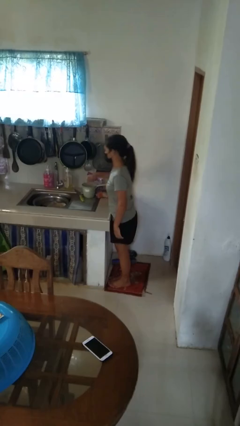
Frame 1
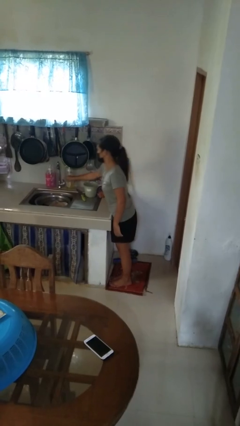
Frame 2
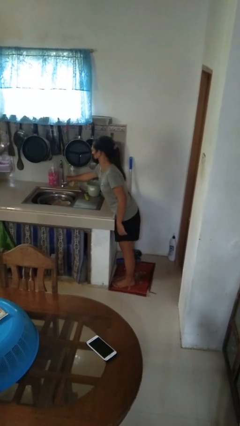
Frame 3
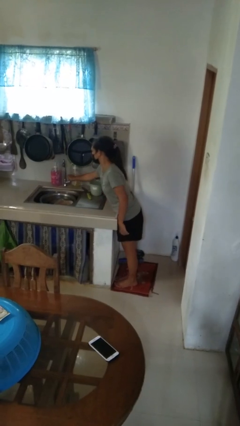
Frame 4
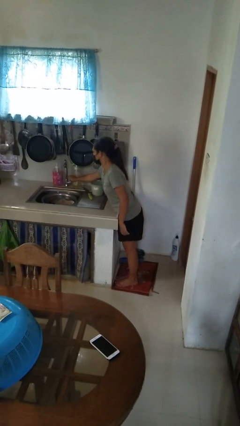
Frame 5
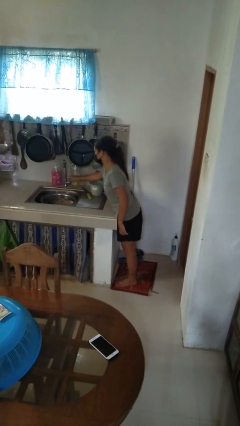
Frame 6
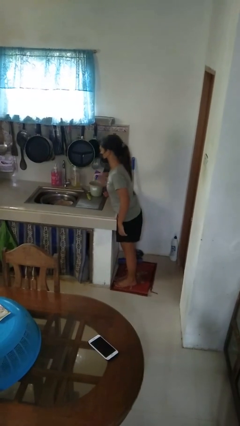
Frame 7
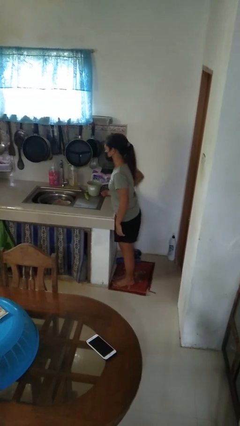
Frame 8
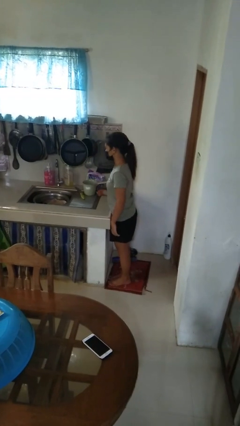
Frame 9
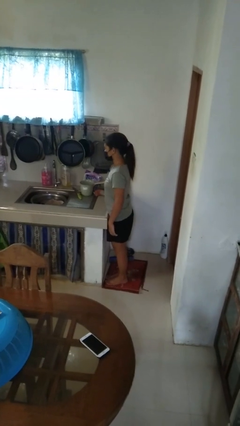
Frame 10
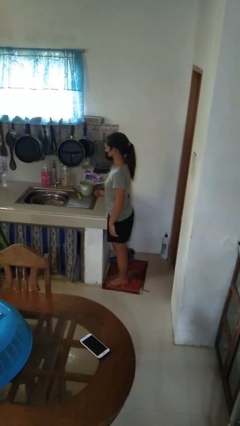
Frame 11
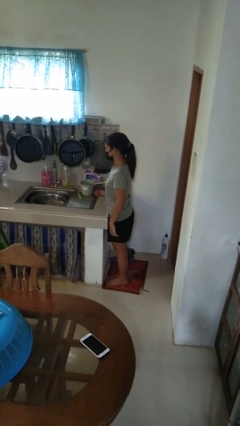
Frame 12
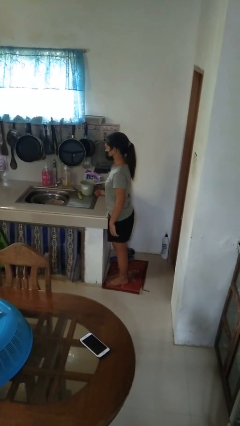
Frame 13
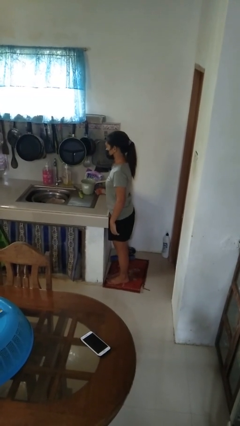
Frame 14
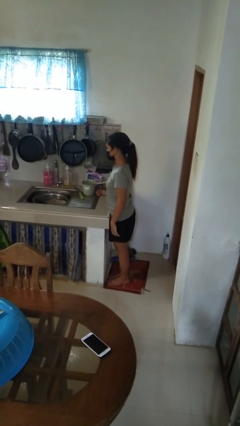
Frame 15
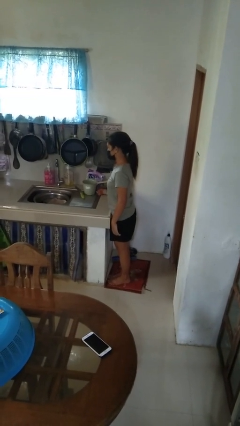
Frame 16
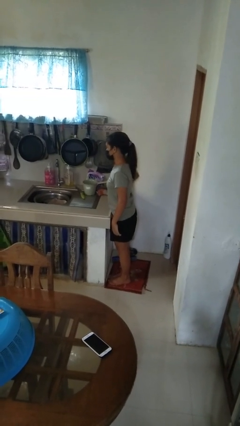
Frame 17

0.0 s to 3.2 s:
person turns on faucet

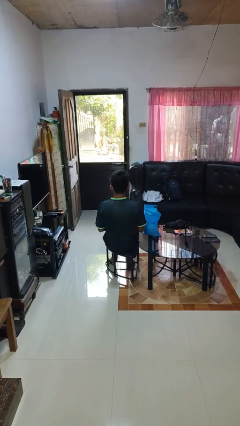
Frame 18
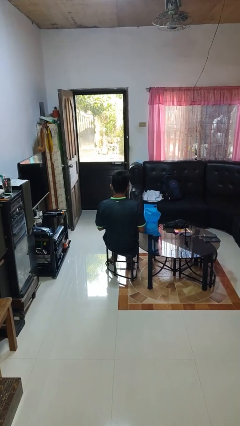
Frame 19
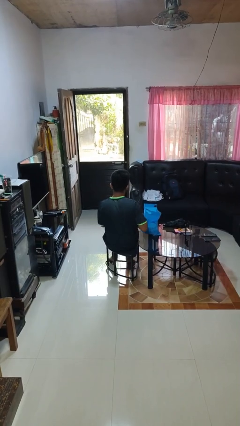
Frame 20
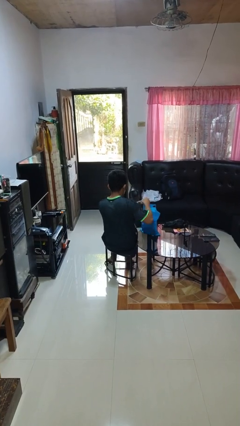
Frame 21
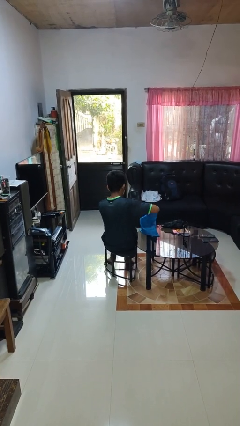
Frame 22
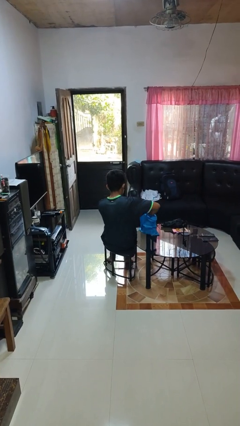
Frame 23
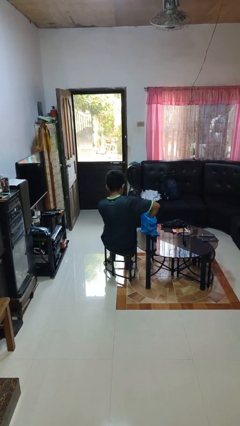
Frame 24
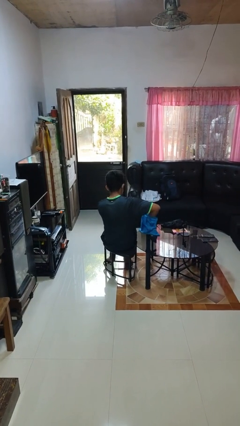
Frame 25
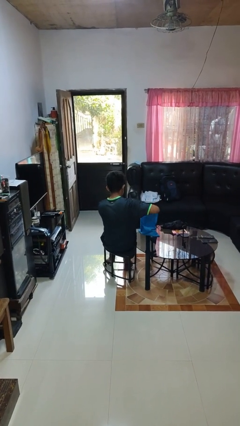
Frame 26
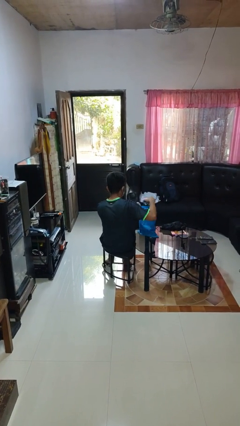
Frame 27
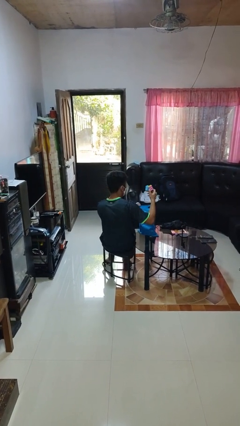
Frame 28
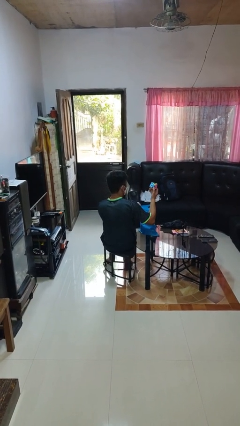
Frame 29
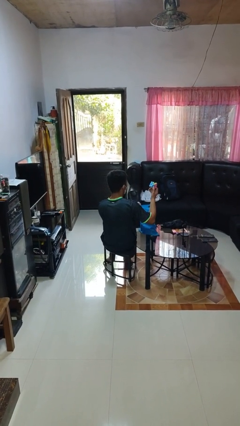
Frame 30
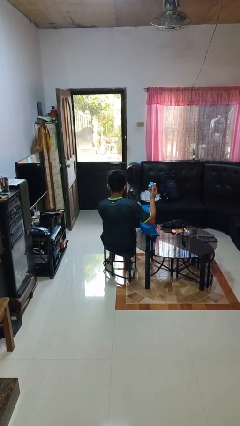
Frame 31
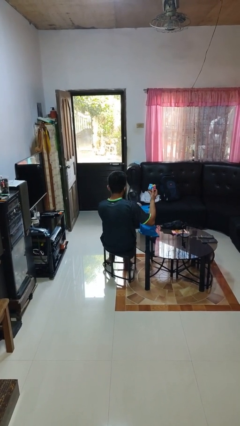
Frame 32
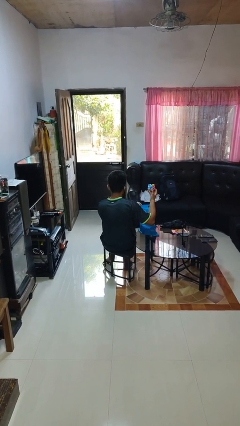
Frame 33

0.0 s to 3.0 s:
person takes object from bag

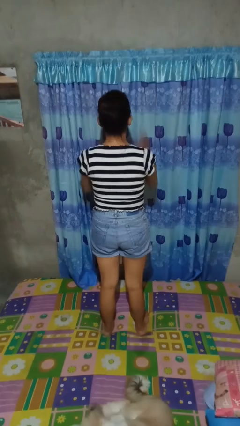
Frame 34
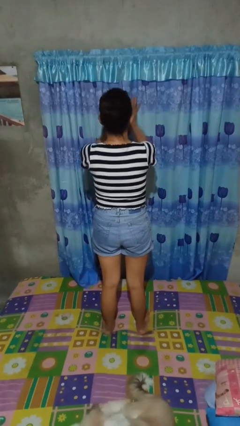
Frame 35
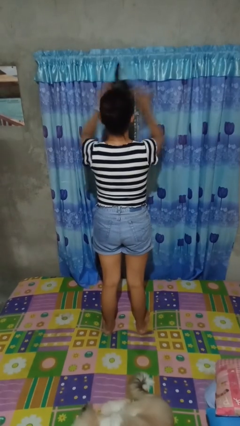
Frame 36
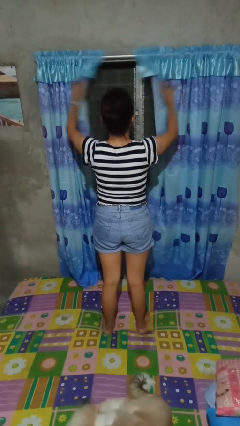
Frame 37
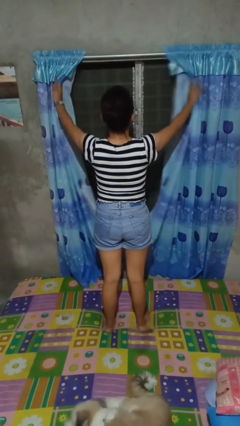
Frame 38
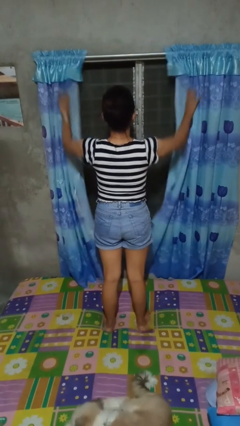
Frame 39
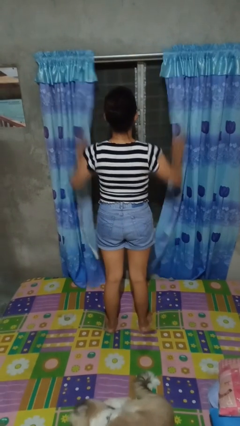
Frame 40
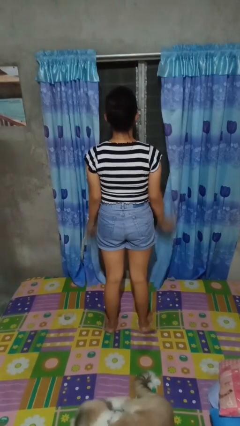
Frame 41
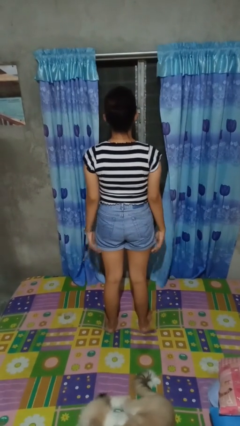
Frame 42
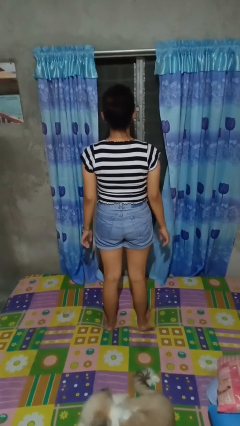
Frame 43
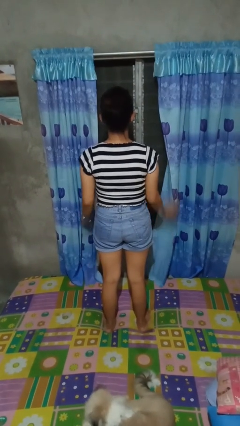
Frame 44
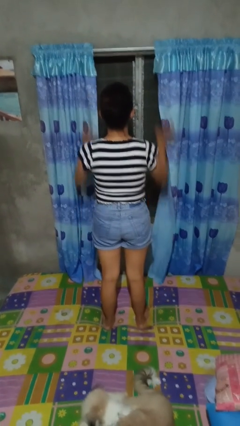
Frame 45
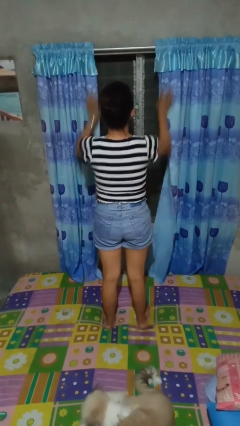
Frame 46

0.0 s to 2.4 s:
person opens curtains

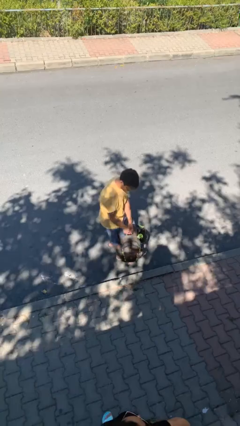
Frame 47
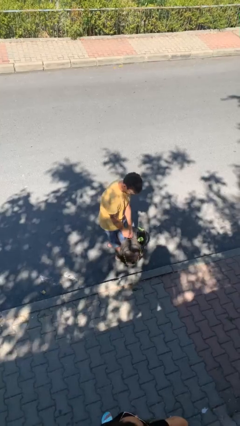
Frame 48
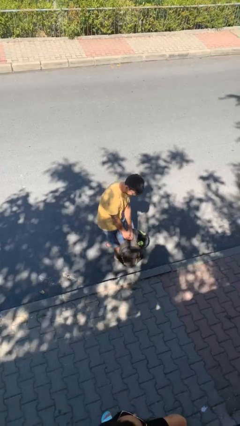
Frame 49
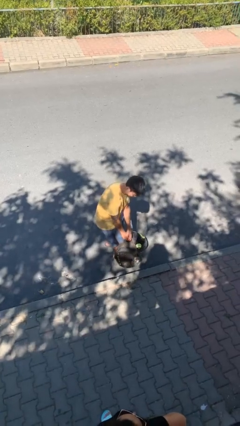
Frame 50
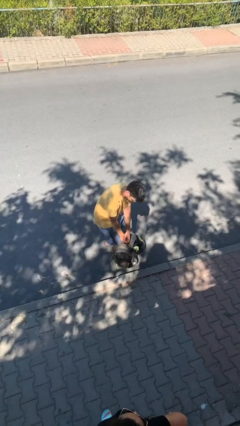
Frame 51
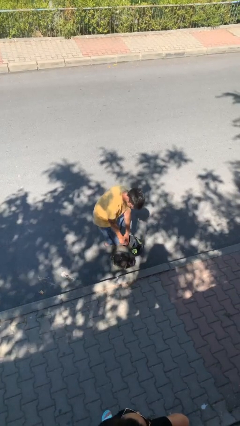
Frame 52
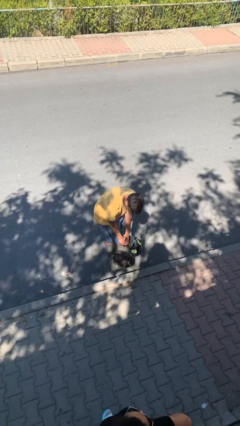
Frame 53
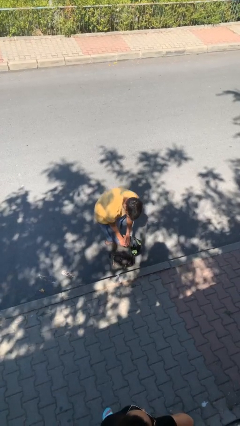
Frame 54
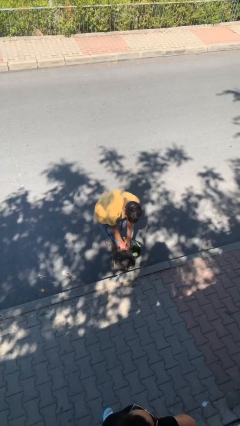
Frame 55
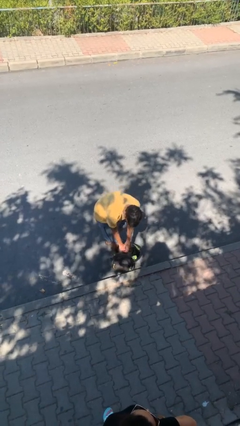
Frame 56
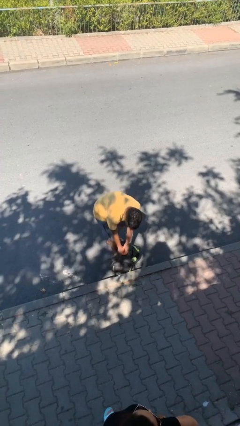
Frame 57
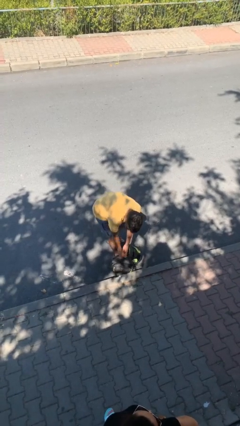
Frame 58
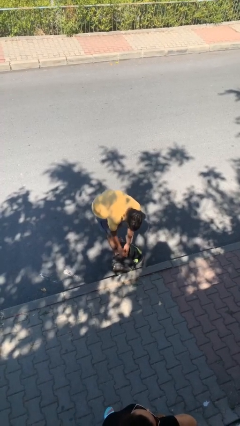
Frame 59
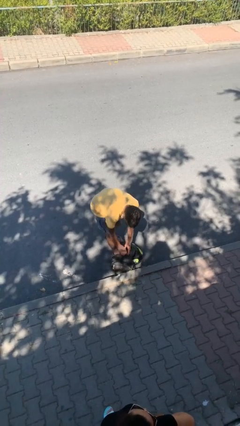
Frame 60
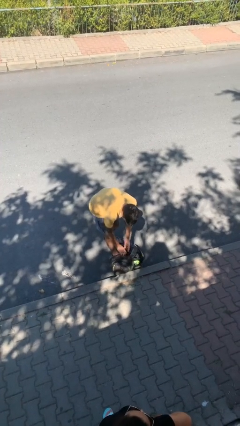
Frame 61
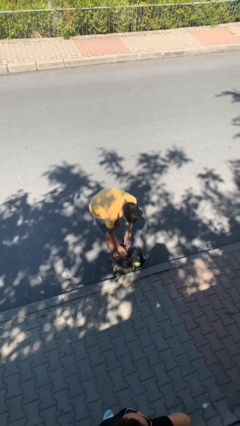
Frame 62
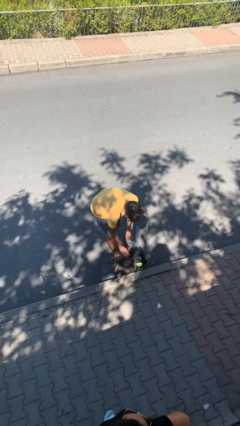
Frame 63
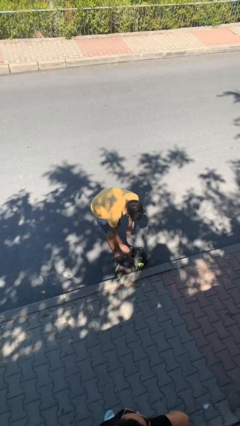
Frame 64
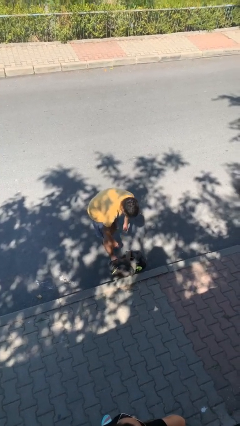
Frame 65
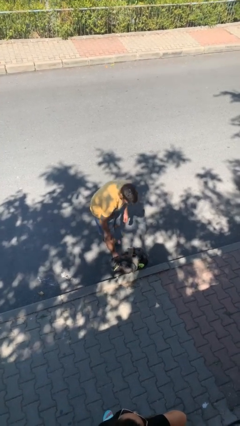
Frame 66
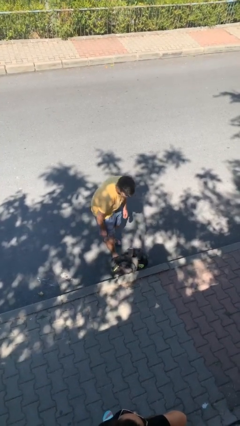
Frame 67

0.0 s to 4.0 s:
person puts down object on floor

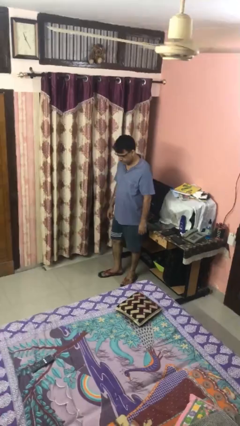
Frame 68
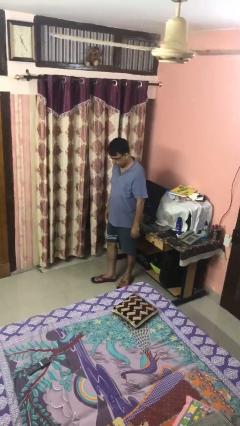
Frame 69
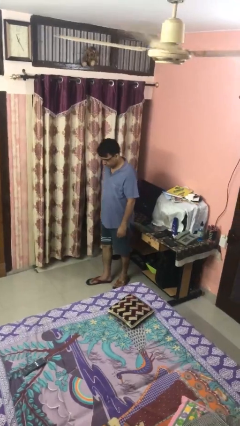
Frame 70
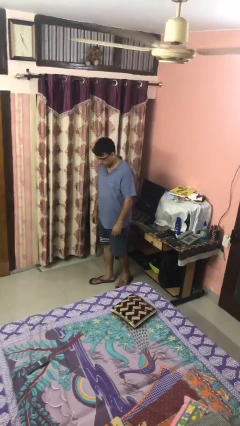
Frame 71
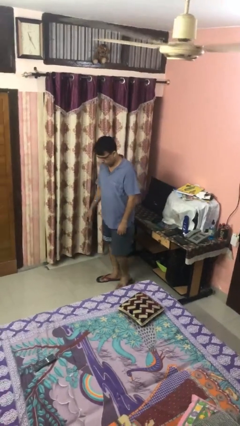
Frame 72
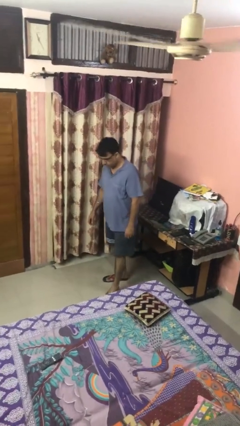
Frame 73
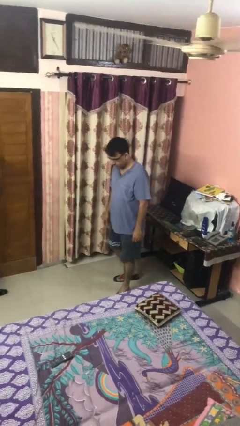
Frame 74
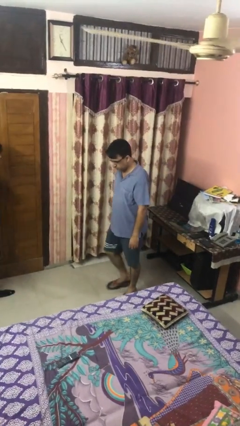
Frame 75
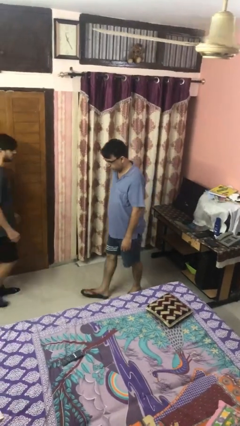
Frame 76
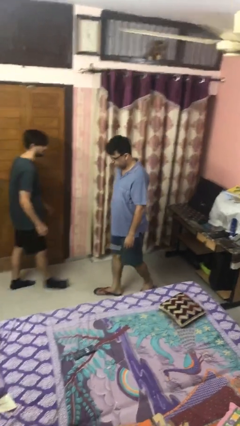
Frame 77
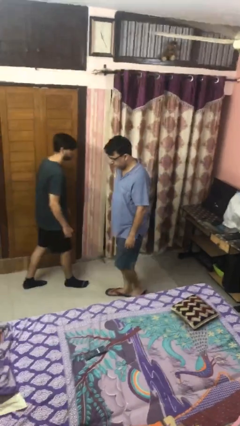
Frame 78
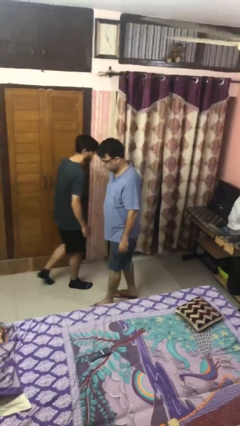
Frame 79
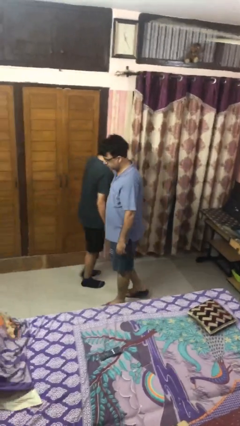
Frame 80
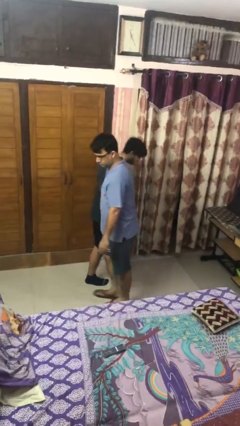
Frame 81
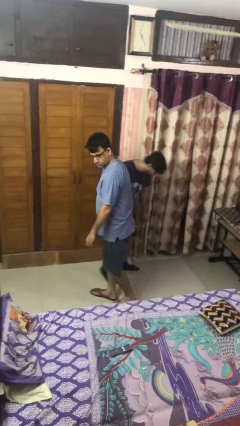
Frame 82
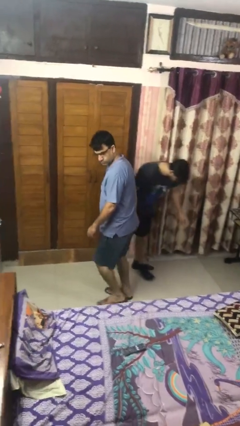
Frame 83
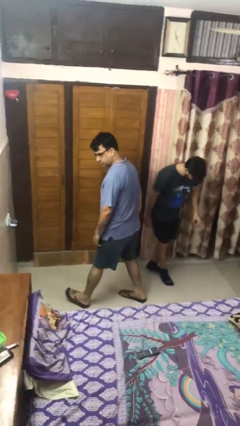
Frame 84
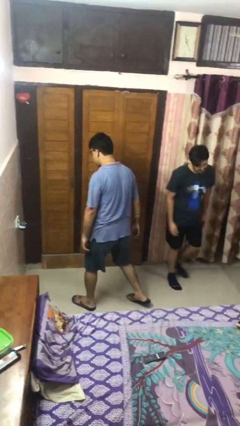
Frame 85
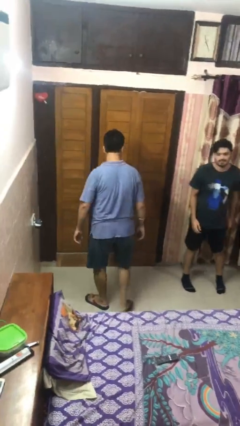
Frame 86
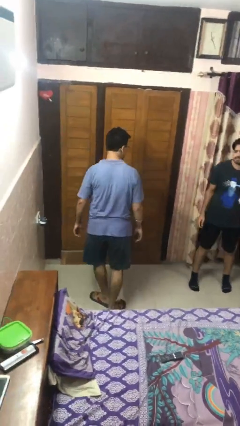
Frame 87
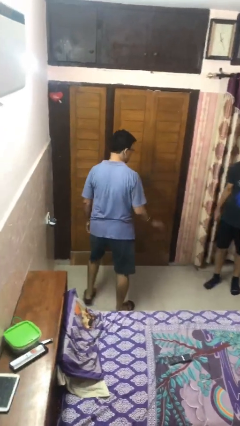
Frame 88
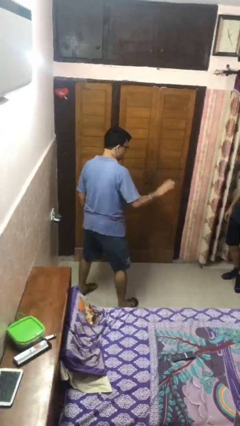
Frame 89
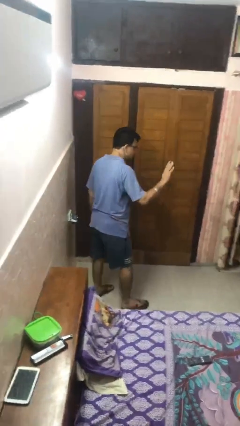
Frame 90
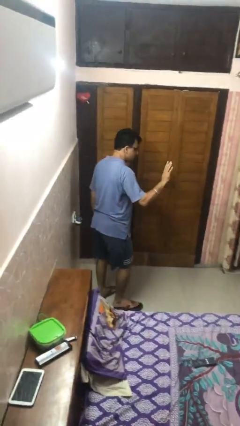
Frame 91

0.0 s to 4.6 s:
person bumps into person

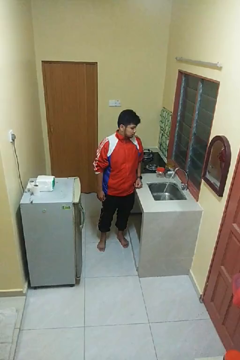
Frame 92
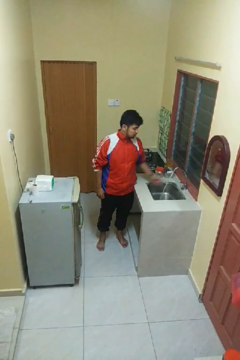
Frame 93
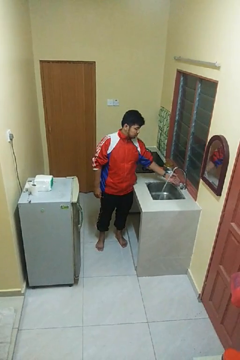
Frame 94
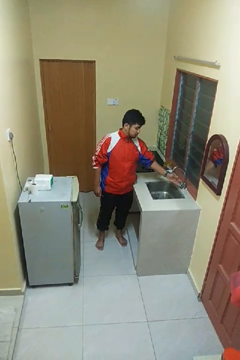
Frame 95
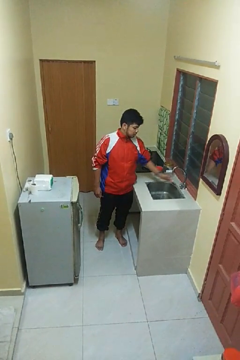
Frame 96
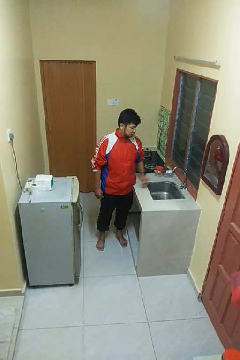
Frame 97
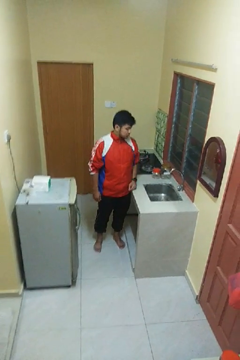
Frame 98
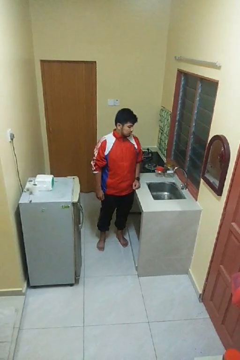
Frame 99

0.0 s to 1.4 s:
person turns off faucet
